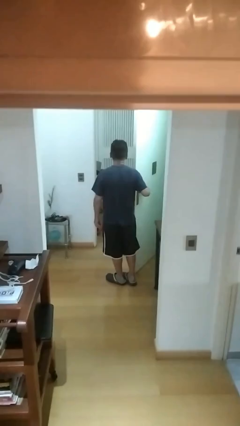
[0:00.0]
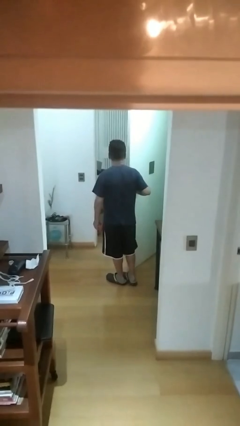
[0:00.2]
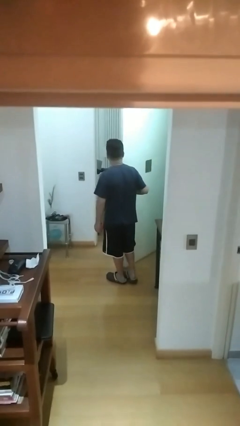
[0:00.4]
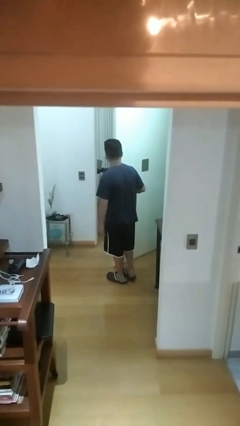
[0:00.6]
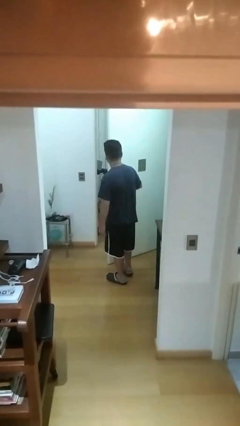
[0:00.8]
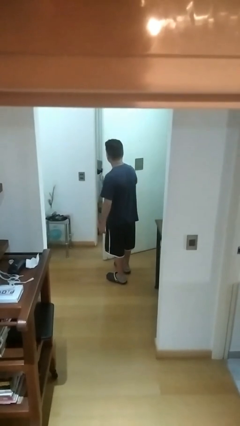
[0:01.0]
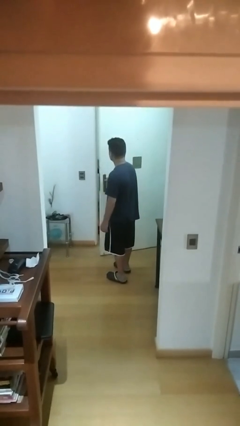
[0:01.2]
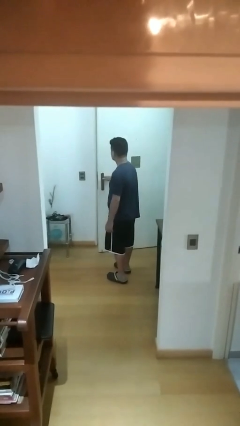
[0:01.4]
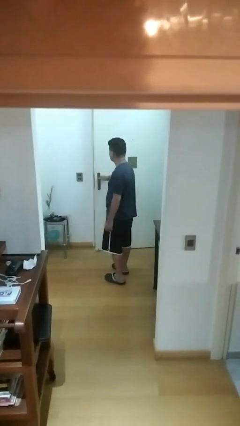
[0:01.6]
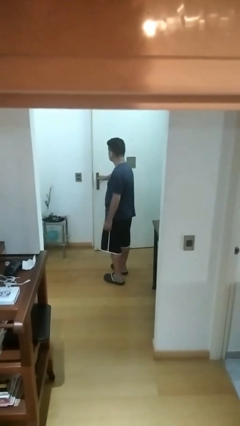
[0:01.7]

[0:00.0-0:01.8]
person closes facility door

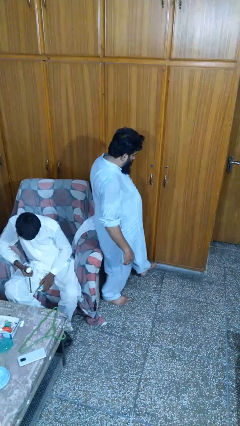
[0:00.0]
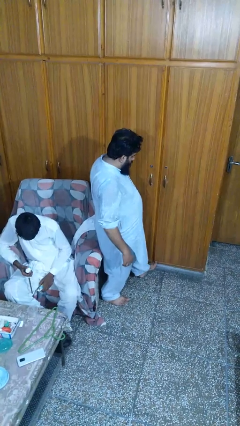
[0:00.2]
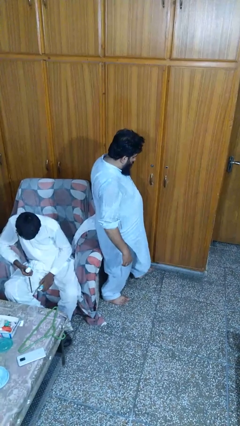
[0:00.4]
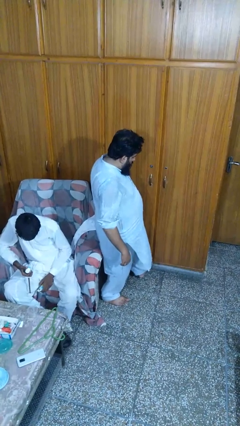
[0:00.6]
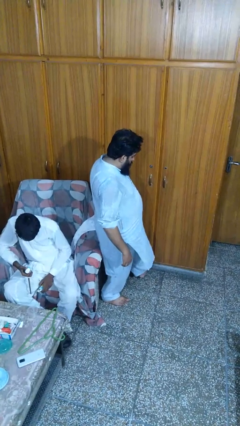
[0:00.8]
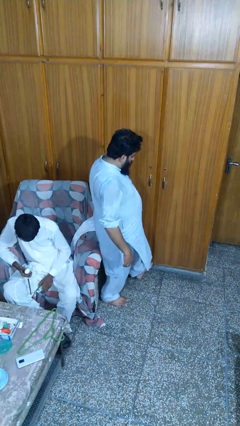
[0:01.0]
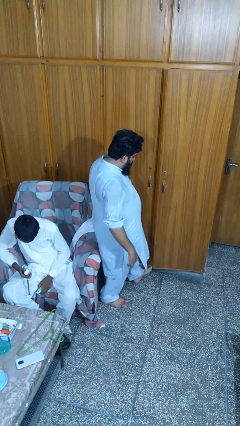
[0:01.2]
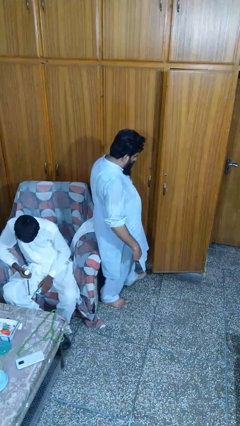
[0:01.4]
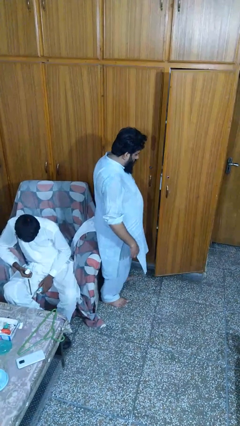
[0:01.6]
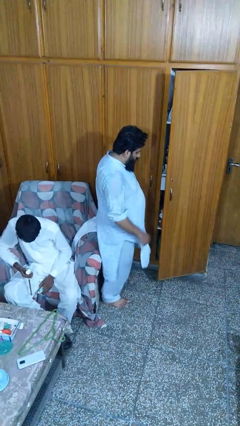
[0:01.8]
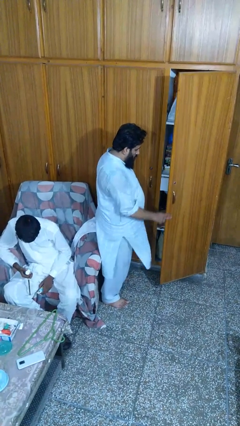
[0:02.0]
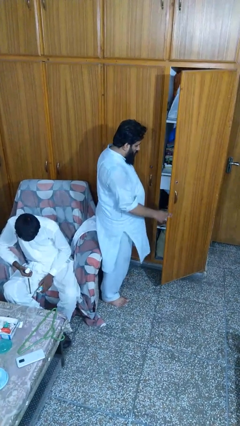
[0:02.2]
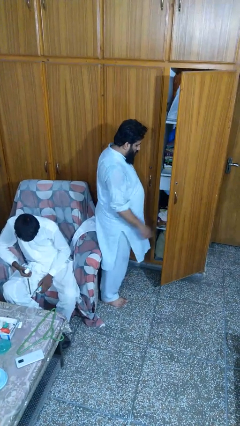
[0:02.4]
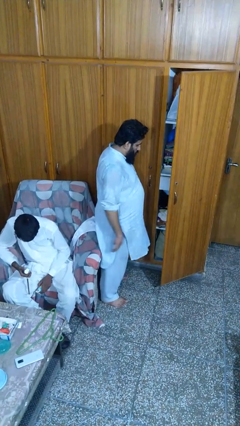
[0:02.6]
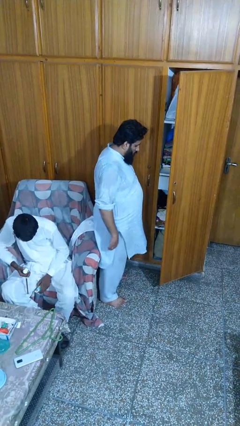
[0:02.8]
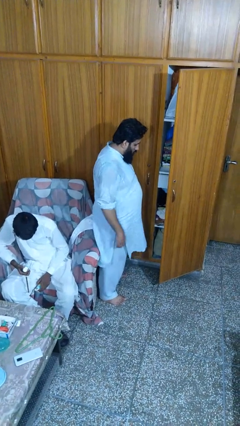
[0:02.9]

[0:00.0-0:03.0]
person opens facility door

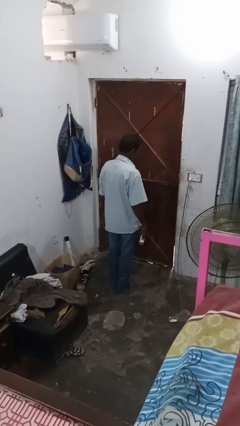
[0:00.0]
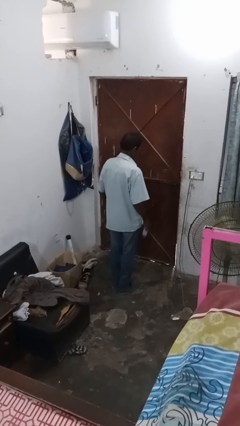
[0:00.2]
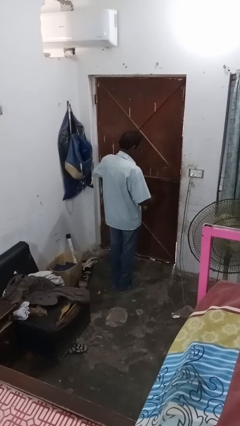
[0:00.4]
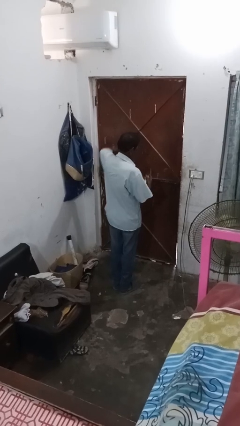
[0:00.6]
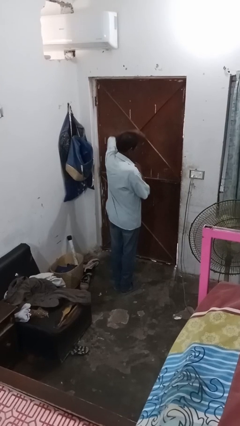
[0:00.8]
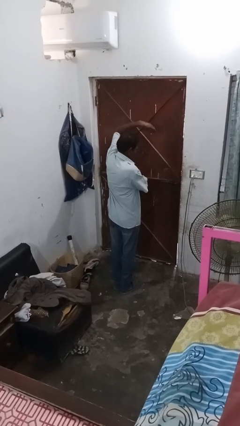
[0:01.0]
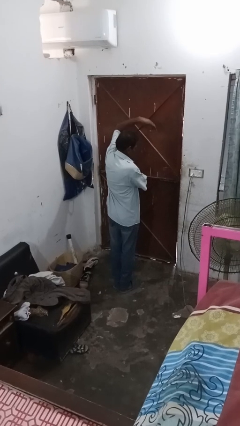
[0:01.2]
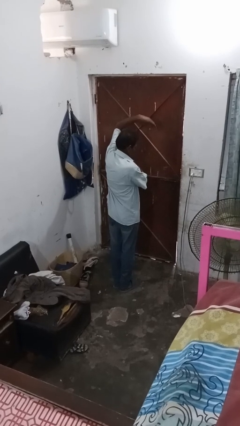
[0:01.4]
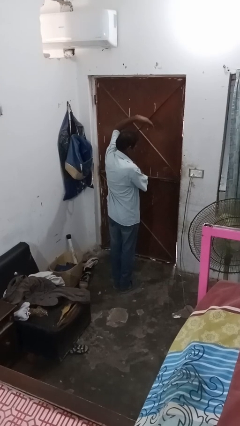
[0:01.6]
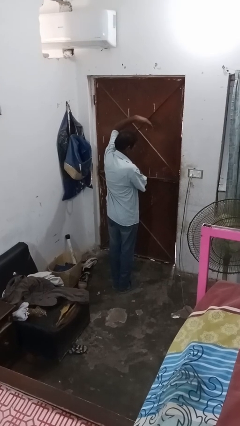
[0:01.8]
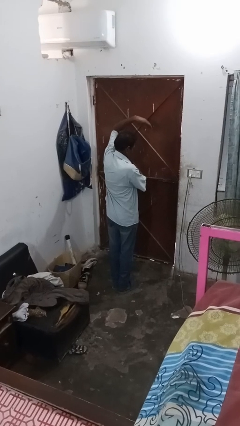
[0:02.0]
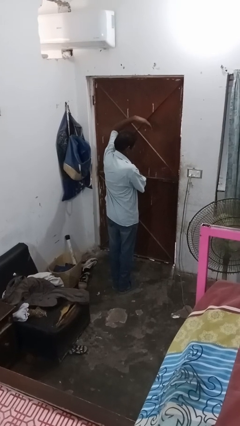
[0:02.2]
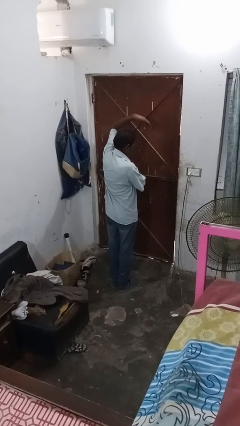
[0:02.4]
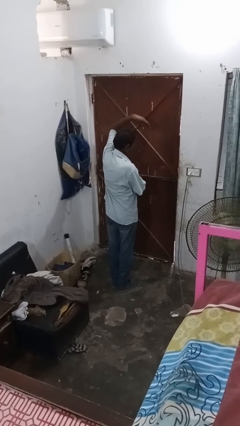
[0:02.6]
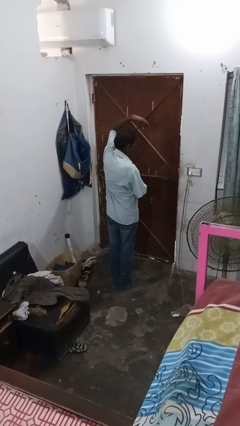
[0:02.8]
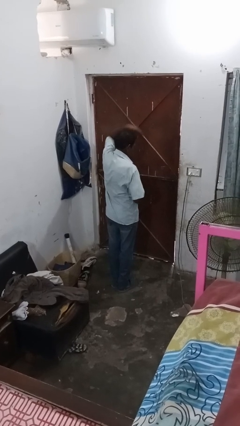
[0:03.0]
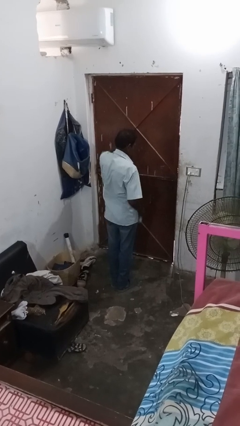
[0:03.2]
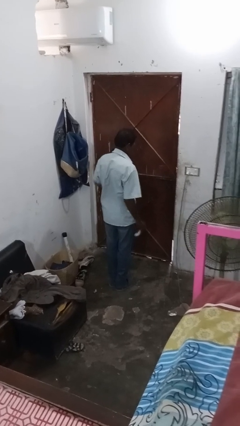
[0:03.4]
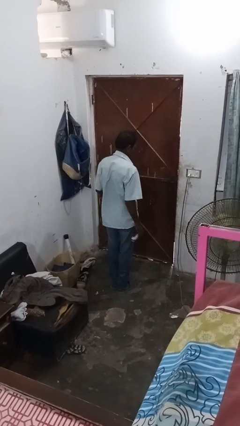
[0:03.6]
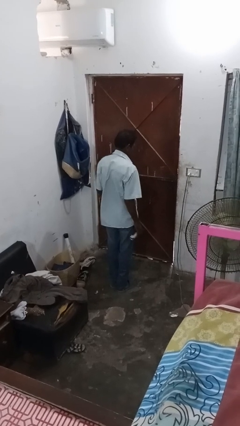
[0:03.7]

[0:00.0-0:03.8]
person applies deodorant

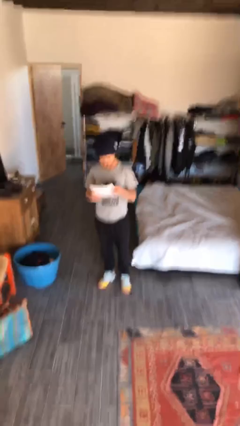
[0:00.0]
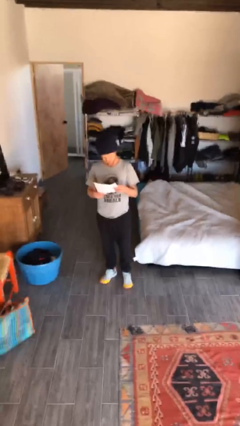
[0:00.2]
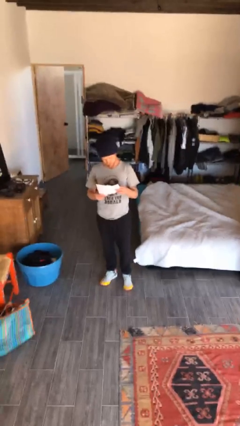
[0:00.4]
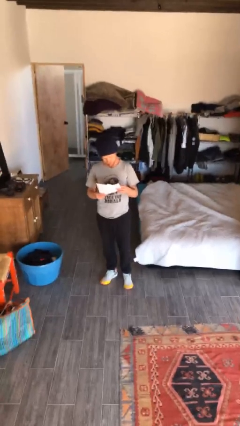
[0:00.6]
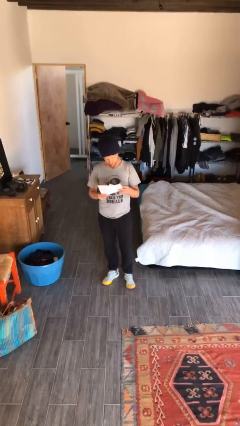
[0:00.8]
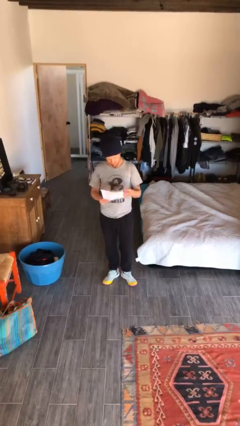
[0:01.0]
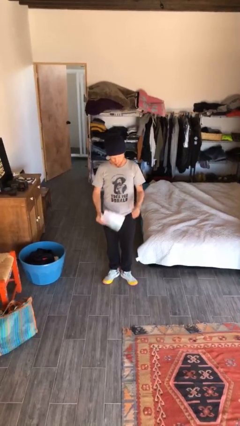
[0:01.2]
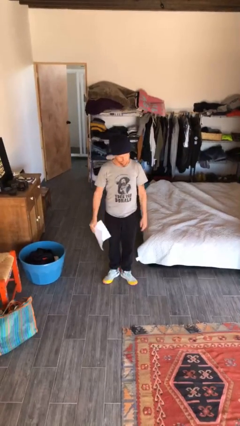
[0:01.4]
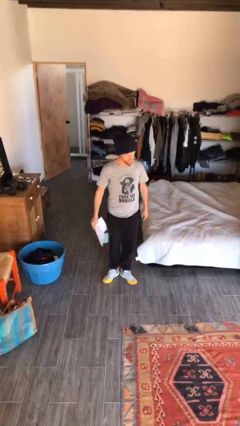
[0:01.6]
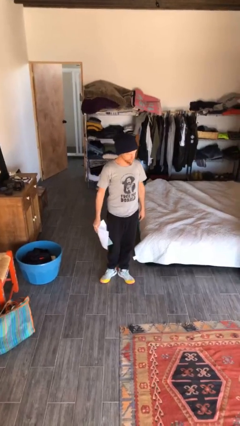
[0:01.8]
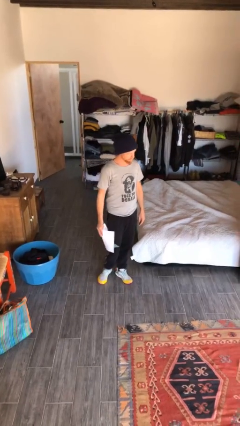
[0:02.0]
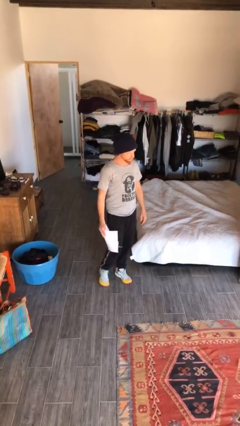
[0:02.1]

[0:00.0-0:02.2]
person reads document

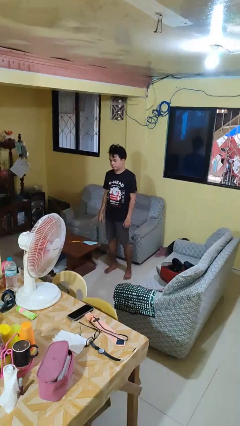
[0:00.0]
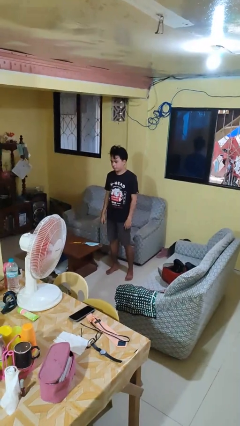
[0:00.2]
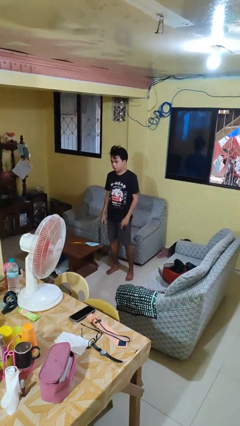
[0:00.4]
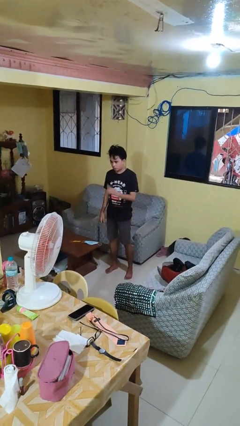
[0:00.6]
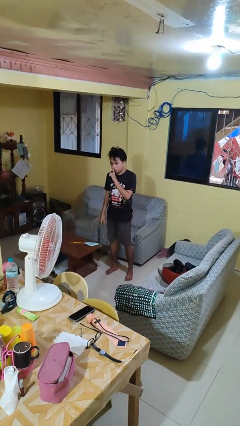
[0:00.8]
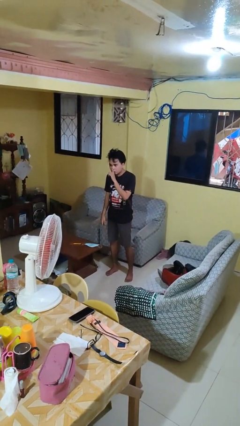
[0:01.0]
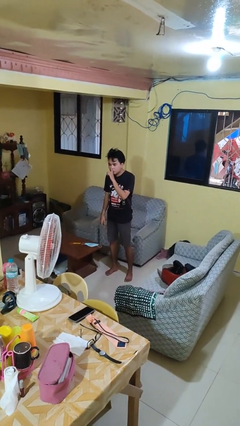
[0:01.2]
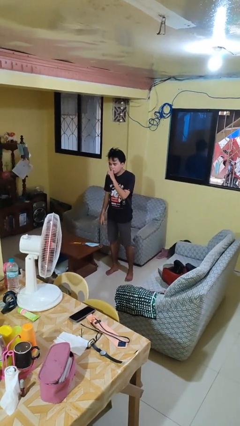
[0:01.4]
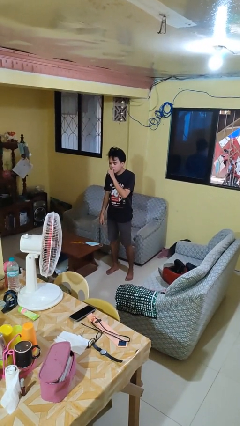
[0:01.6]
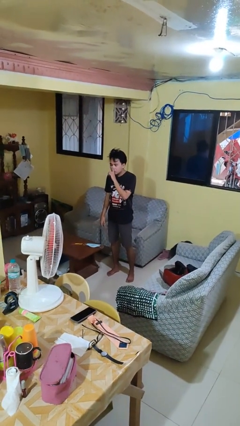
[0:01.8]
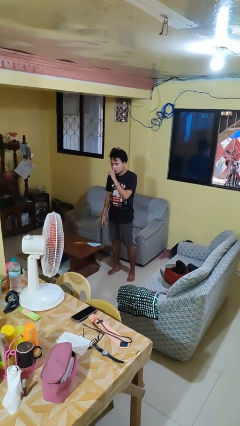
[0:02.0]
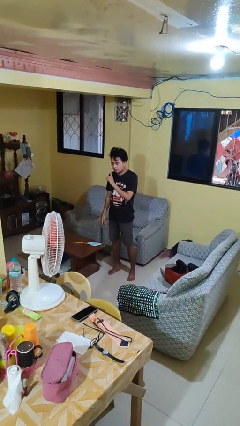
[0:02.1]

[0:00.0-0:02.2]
person gestures be quiet

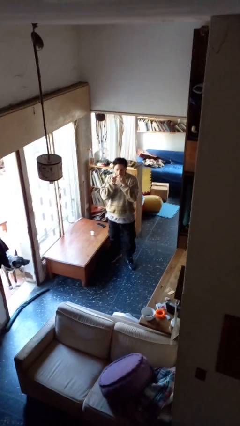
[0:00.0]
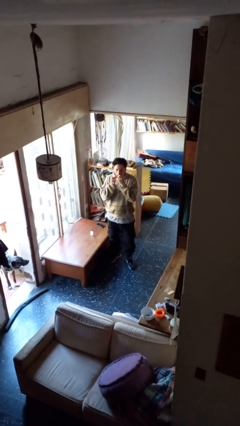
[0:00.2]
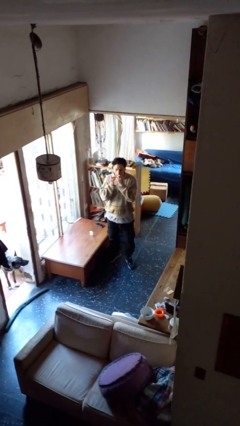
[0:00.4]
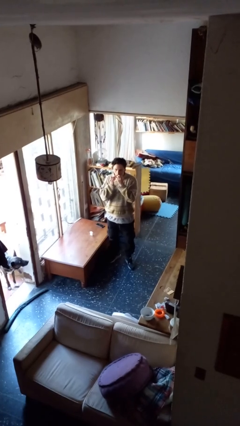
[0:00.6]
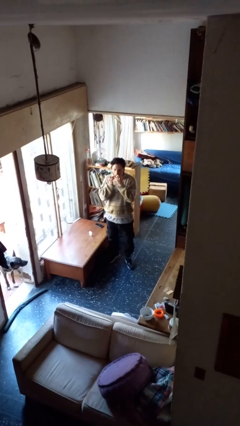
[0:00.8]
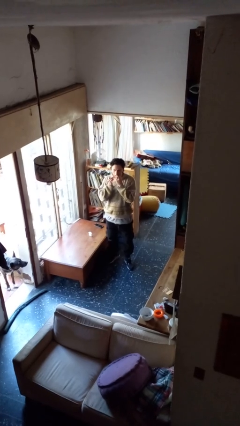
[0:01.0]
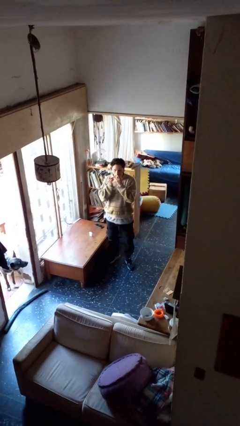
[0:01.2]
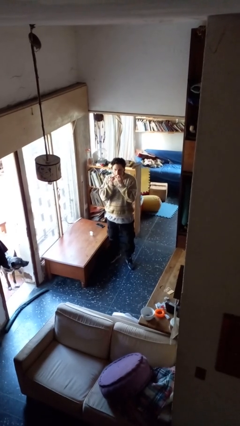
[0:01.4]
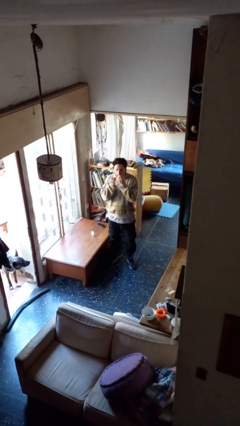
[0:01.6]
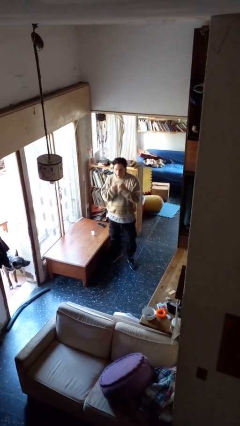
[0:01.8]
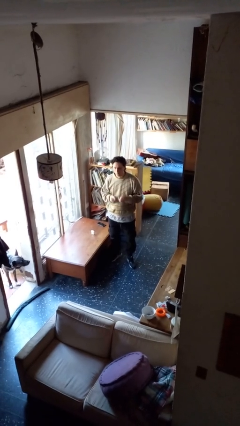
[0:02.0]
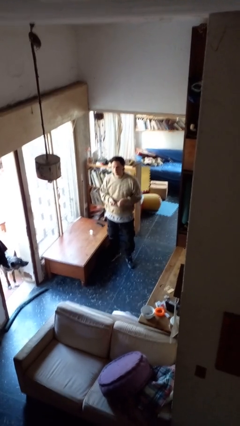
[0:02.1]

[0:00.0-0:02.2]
person flosses

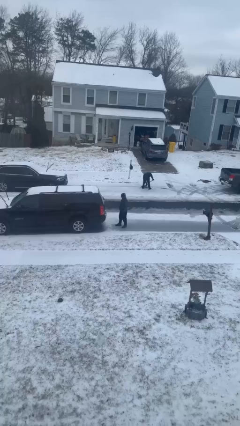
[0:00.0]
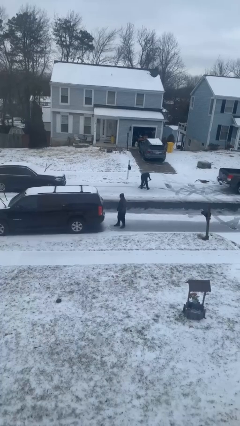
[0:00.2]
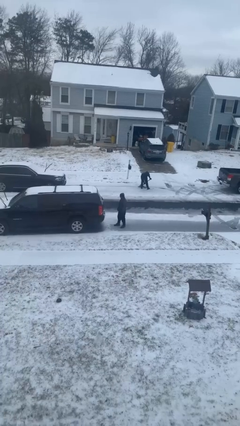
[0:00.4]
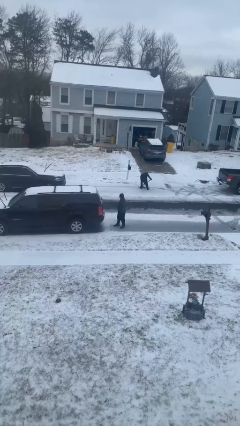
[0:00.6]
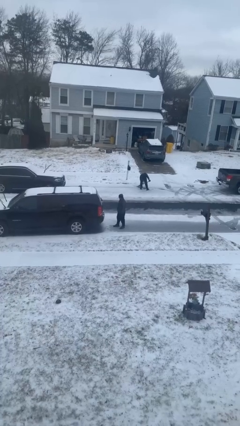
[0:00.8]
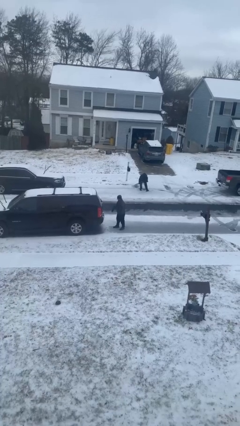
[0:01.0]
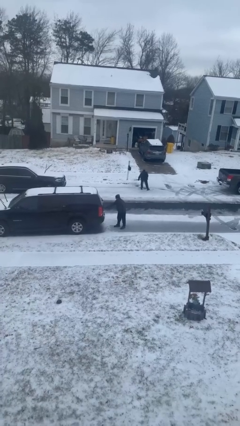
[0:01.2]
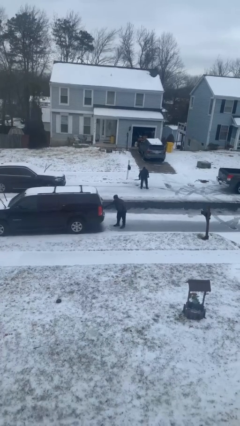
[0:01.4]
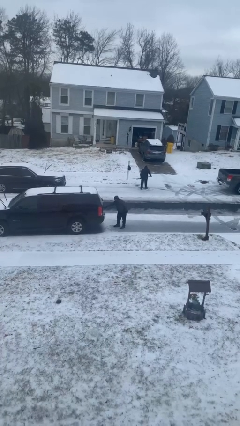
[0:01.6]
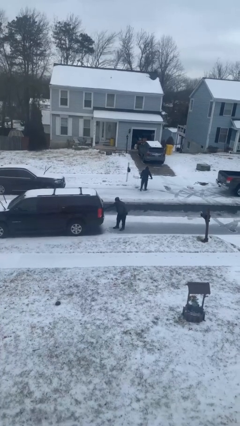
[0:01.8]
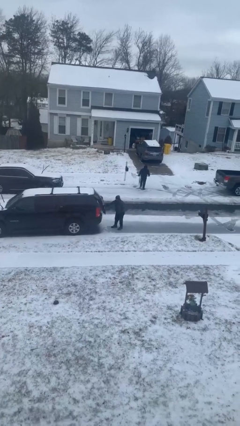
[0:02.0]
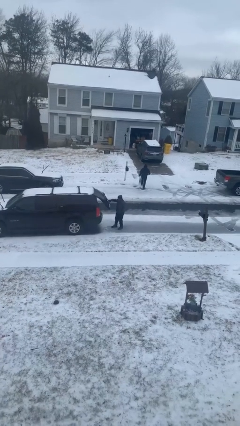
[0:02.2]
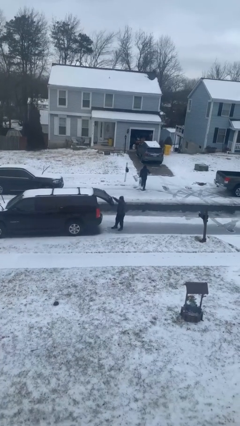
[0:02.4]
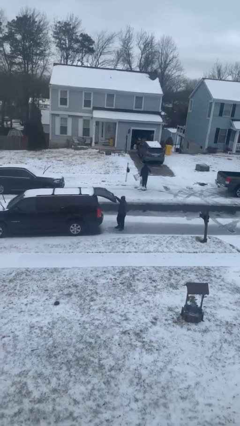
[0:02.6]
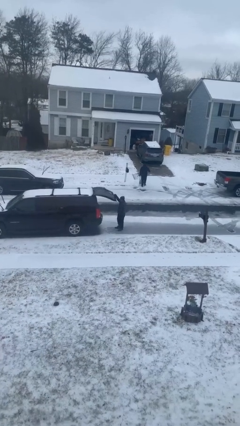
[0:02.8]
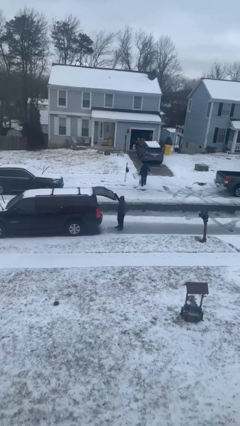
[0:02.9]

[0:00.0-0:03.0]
person opens car trunk
